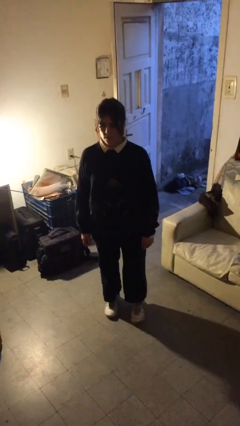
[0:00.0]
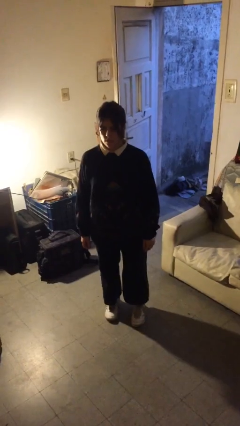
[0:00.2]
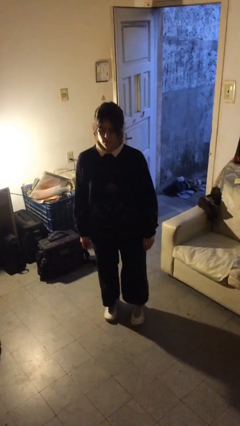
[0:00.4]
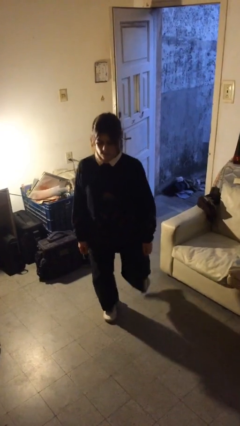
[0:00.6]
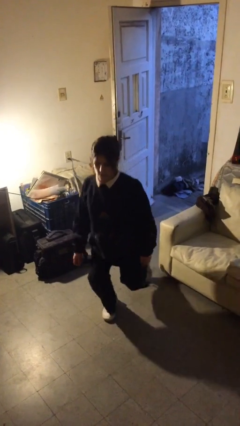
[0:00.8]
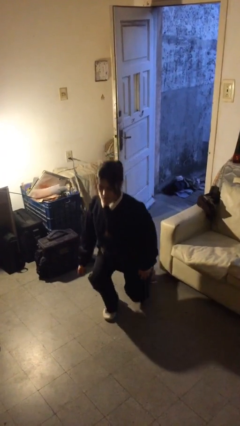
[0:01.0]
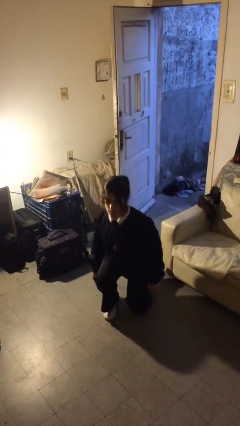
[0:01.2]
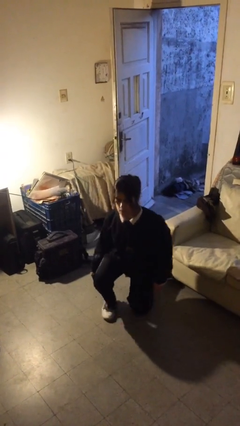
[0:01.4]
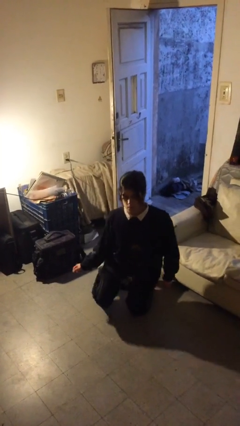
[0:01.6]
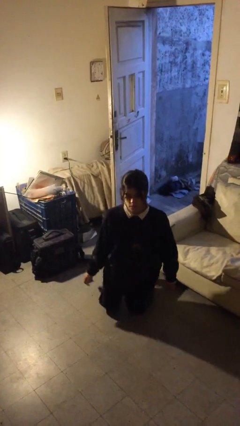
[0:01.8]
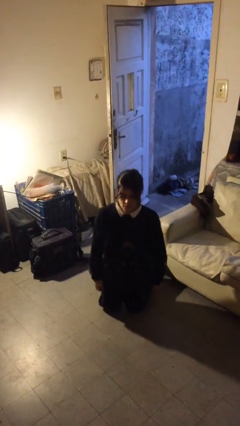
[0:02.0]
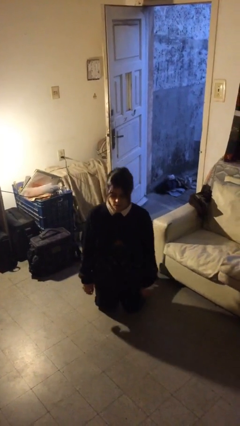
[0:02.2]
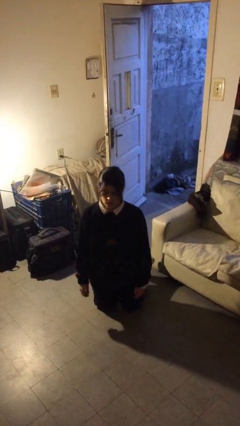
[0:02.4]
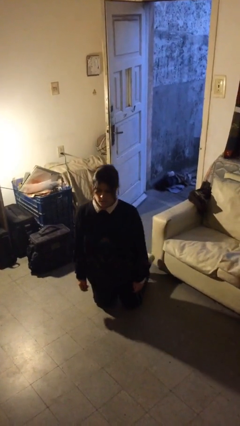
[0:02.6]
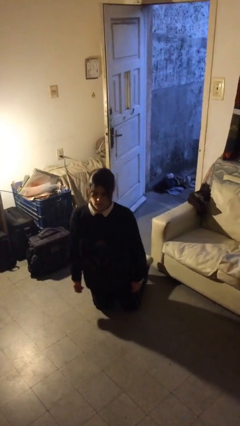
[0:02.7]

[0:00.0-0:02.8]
person kneels

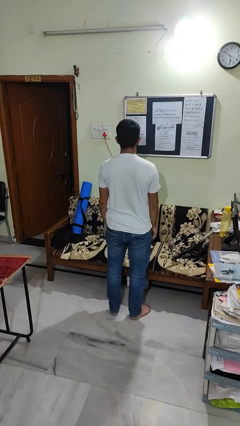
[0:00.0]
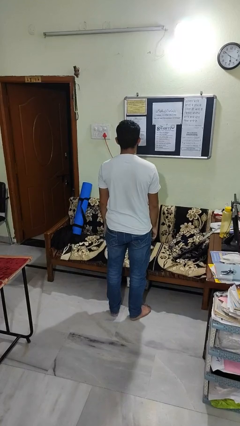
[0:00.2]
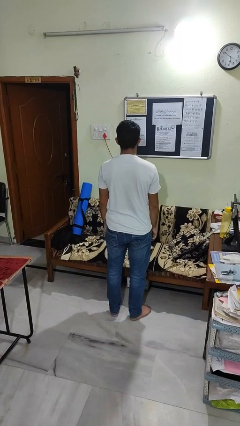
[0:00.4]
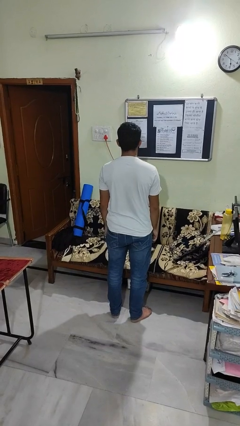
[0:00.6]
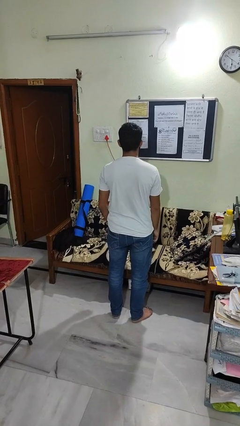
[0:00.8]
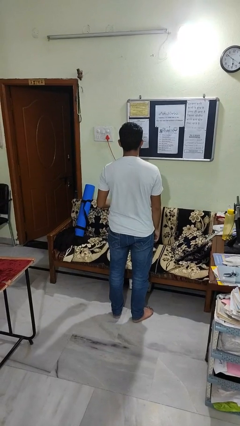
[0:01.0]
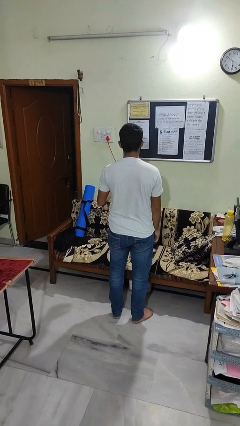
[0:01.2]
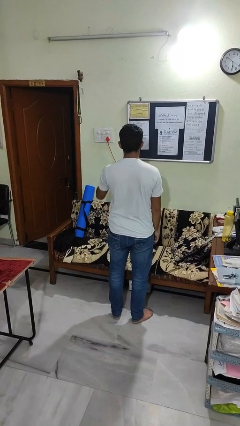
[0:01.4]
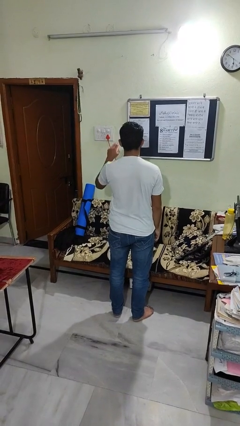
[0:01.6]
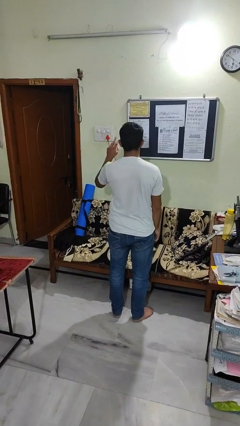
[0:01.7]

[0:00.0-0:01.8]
person gestures number three

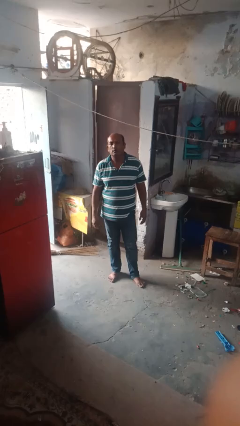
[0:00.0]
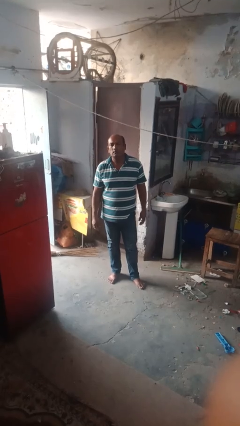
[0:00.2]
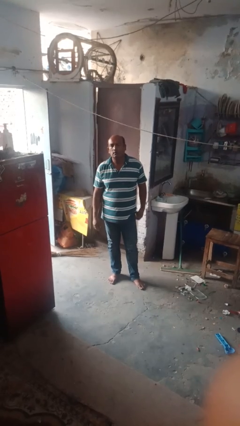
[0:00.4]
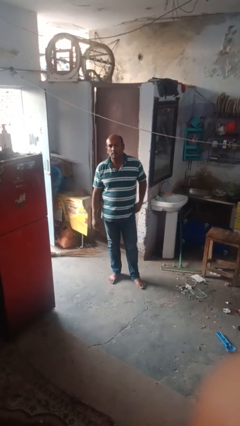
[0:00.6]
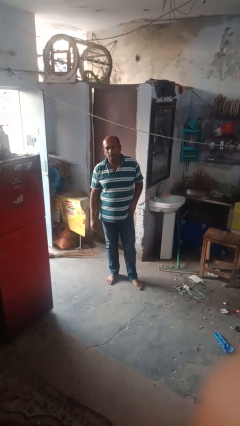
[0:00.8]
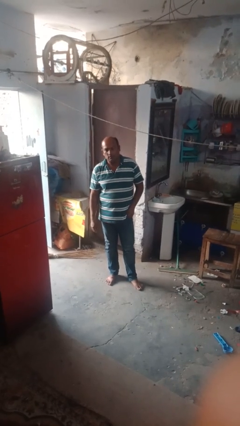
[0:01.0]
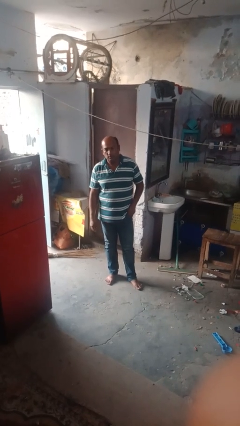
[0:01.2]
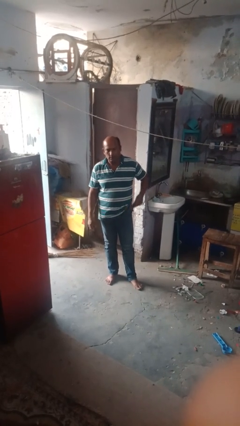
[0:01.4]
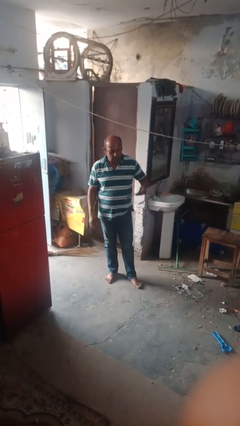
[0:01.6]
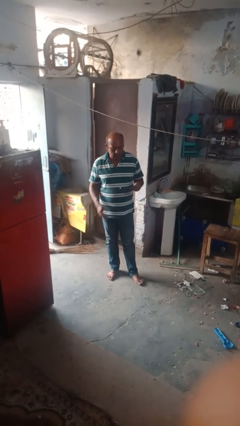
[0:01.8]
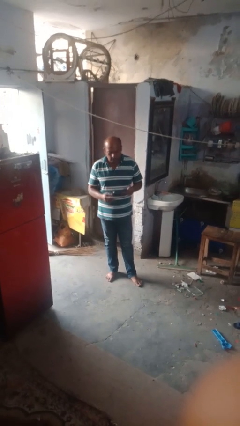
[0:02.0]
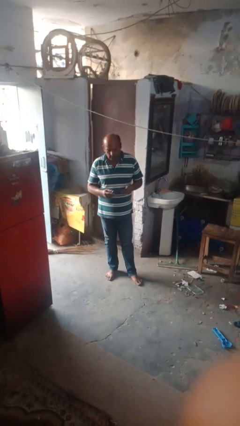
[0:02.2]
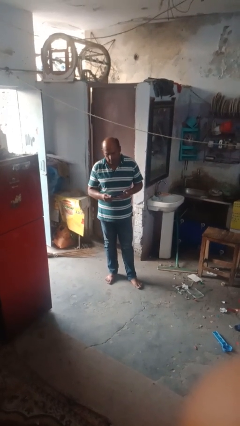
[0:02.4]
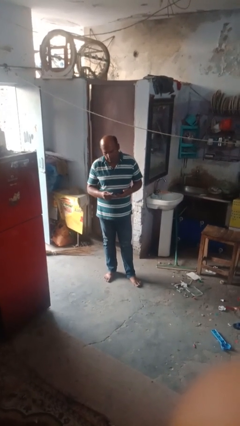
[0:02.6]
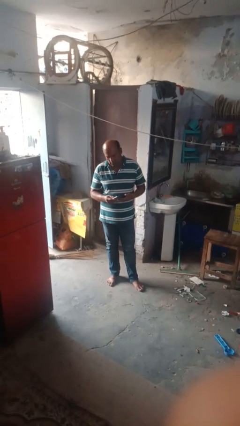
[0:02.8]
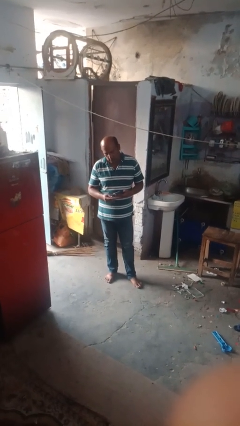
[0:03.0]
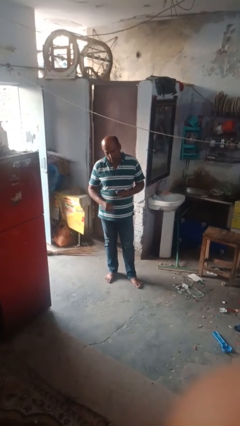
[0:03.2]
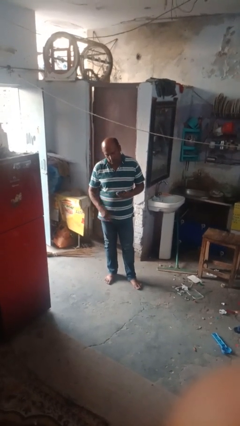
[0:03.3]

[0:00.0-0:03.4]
person takes phone from pocket

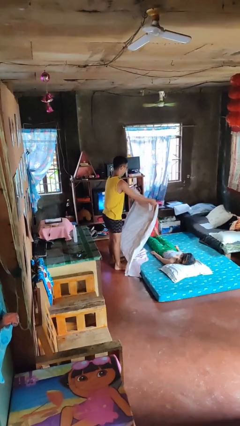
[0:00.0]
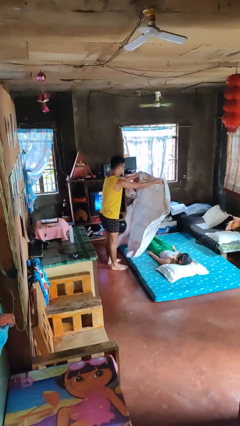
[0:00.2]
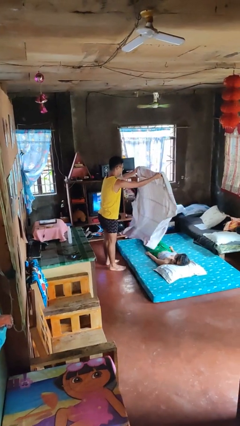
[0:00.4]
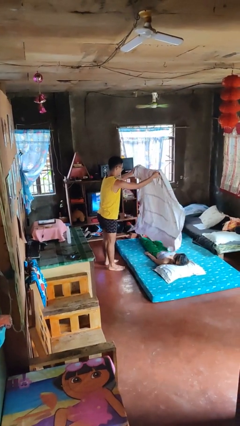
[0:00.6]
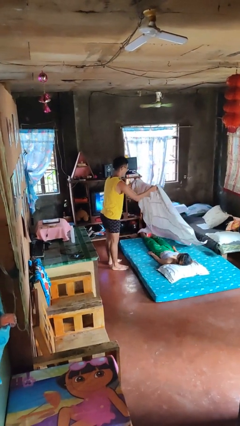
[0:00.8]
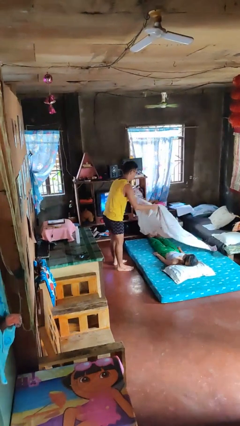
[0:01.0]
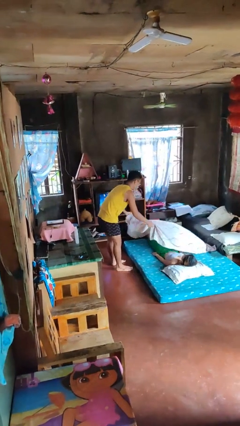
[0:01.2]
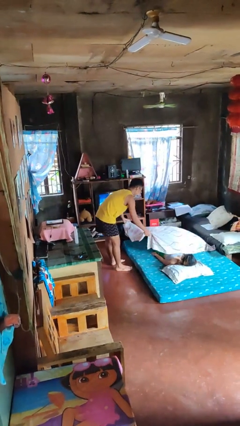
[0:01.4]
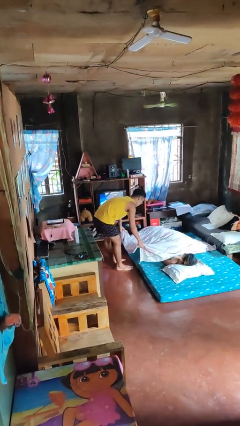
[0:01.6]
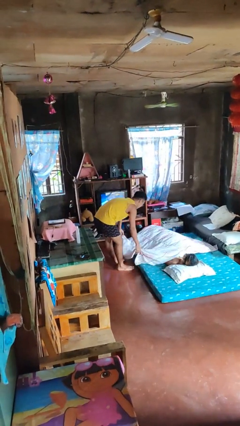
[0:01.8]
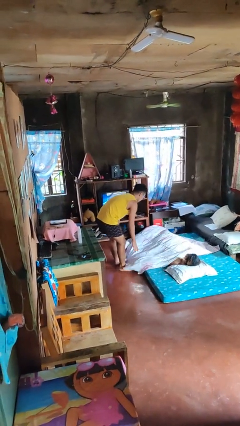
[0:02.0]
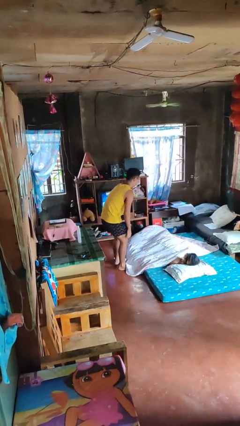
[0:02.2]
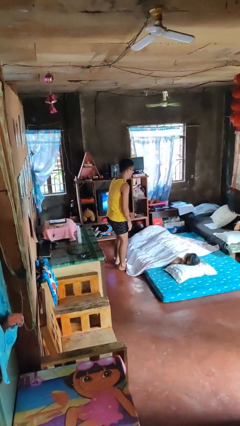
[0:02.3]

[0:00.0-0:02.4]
person covers friend with blanket

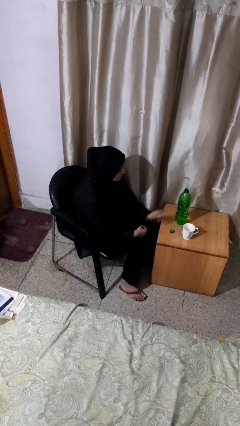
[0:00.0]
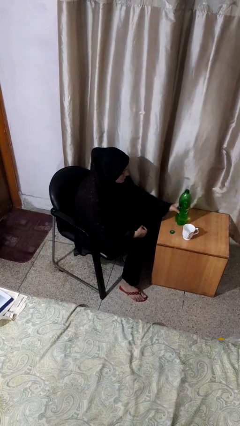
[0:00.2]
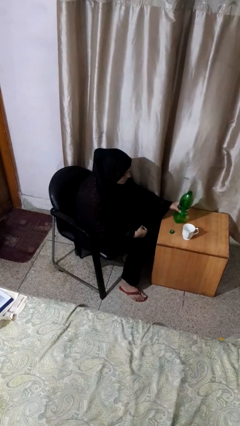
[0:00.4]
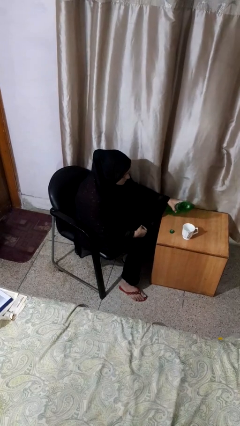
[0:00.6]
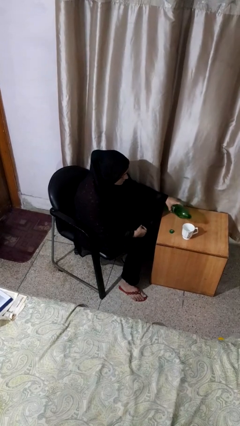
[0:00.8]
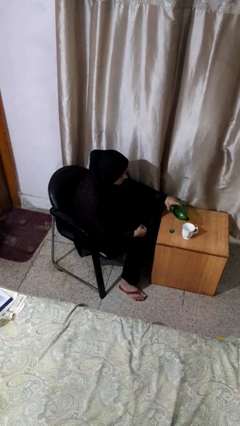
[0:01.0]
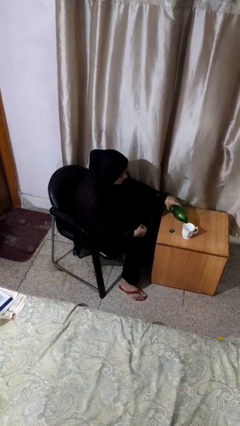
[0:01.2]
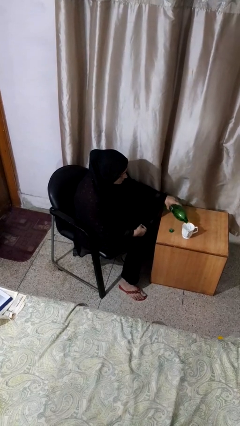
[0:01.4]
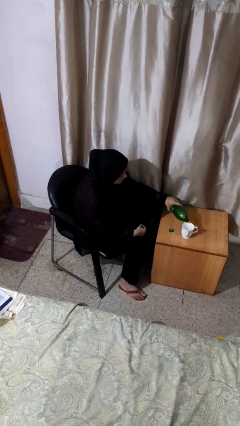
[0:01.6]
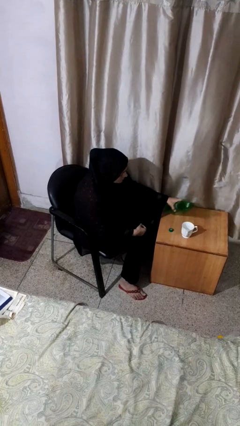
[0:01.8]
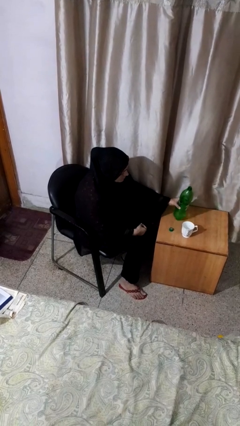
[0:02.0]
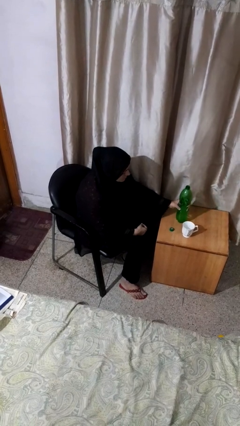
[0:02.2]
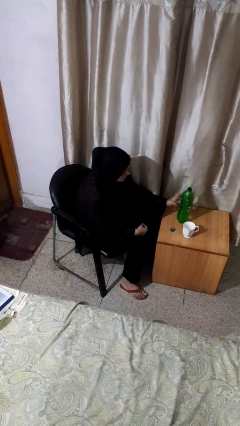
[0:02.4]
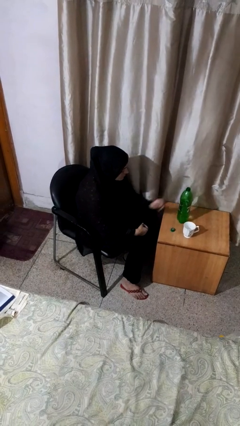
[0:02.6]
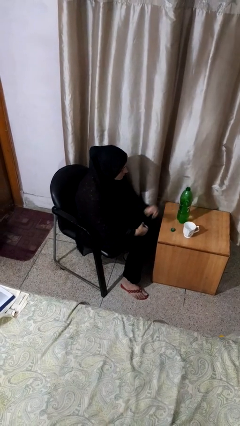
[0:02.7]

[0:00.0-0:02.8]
person pours liquid into cup

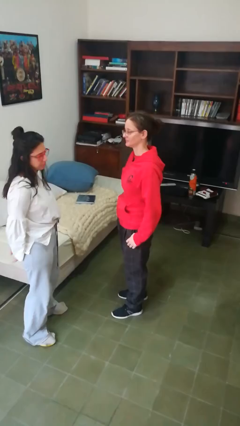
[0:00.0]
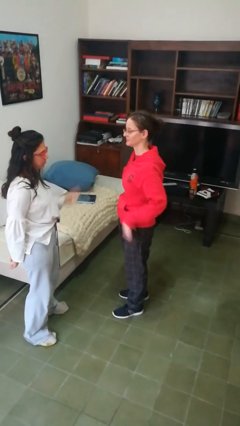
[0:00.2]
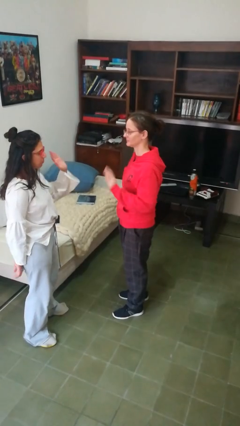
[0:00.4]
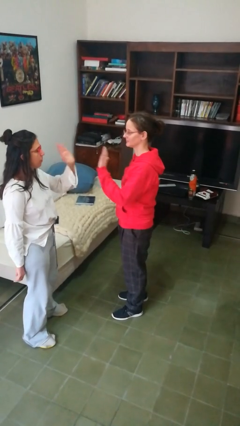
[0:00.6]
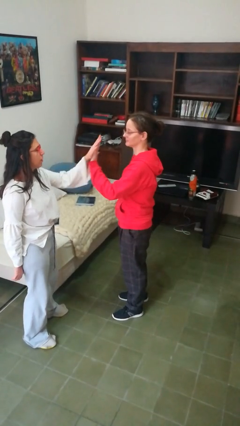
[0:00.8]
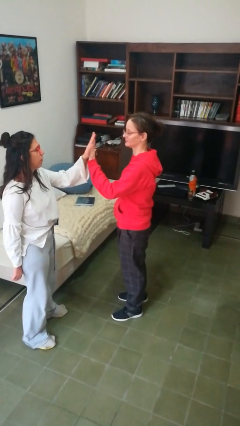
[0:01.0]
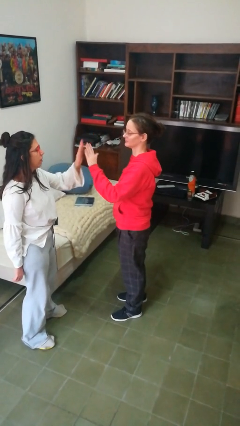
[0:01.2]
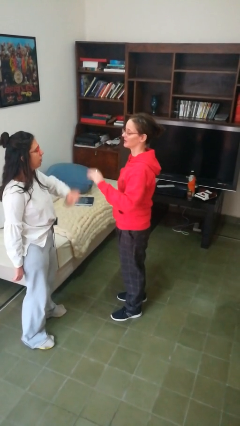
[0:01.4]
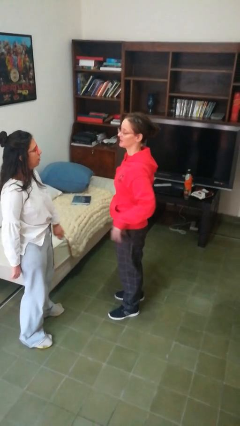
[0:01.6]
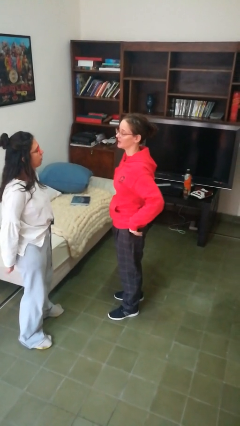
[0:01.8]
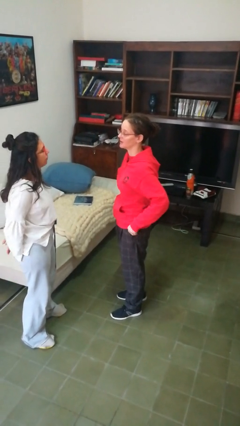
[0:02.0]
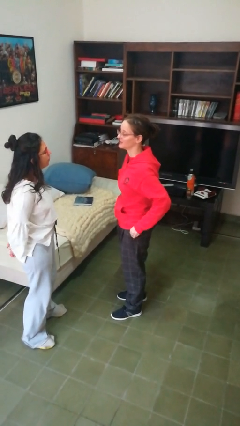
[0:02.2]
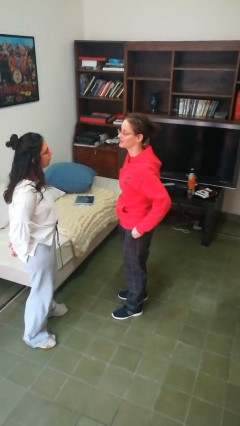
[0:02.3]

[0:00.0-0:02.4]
person highfives hand

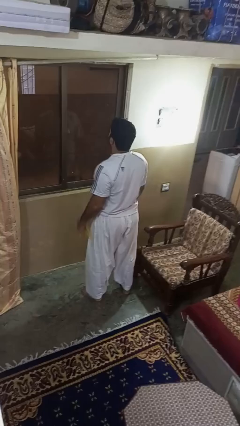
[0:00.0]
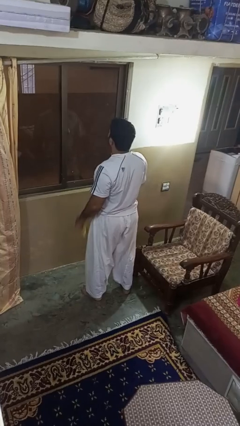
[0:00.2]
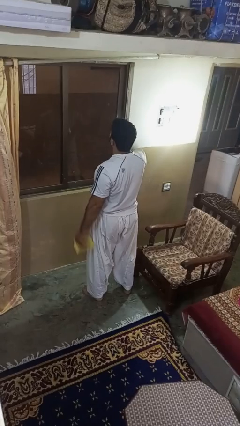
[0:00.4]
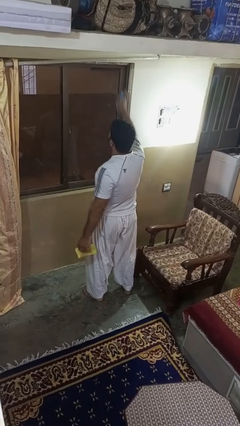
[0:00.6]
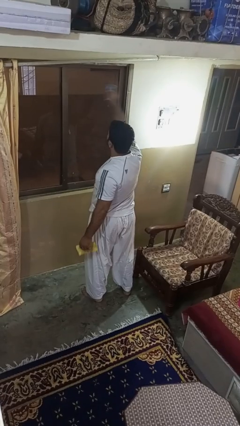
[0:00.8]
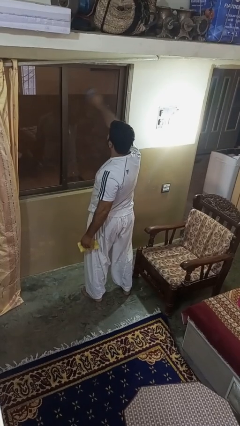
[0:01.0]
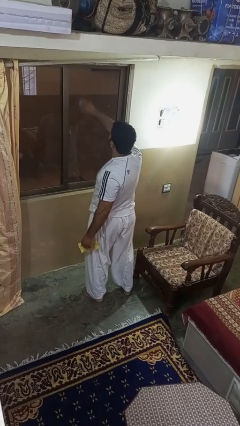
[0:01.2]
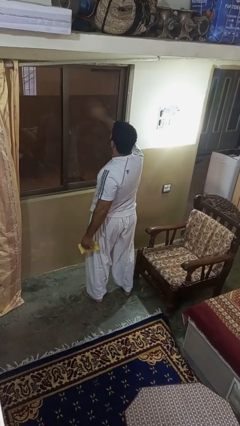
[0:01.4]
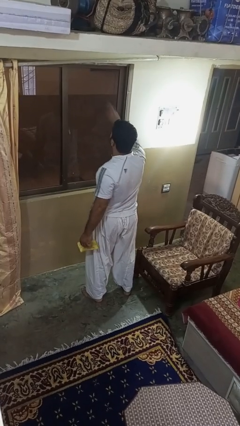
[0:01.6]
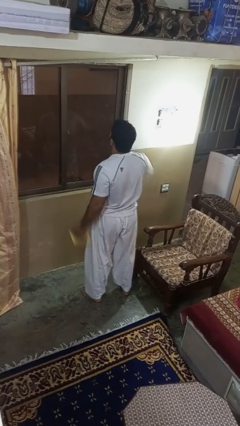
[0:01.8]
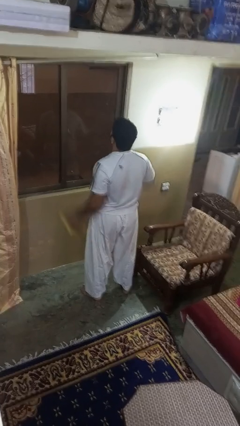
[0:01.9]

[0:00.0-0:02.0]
person sprays from bottle
